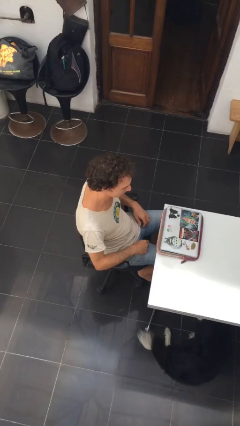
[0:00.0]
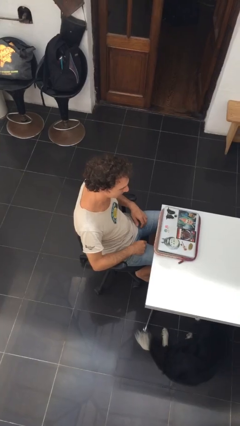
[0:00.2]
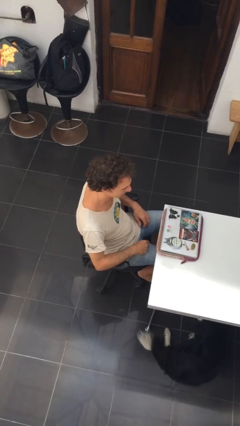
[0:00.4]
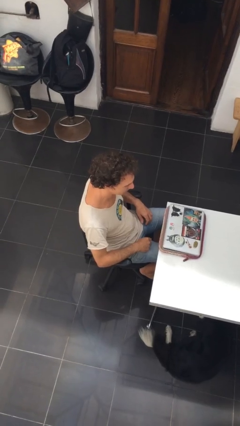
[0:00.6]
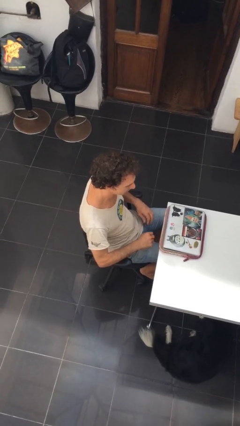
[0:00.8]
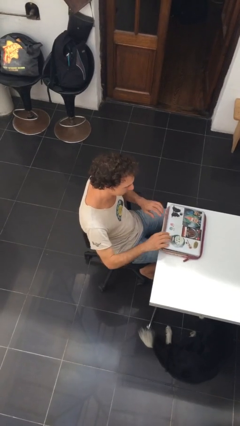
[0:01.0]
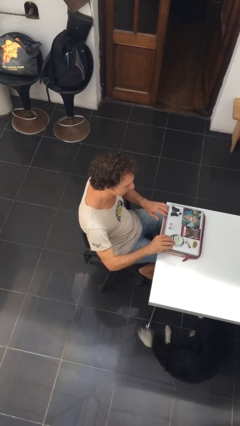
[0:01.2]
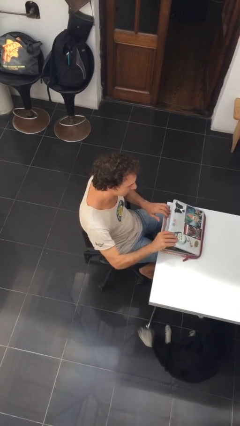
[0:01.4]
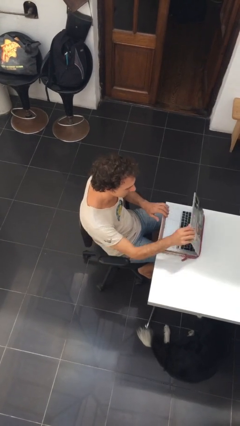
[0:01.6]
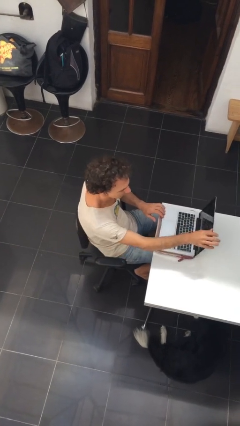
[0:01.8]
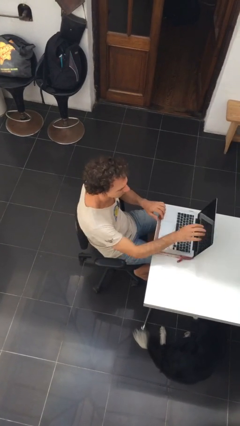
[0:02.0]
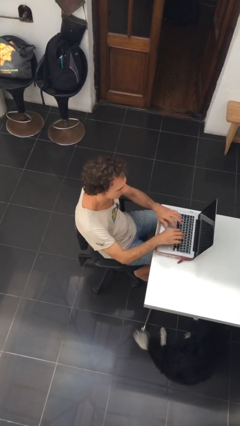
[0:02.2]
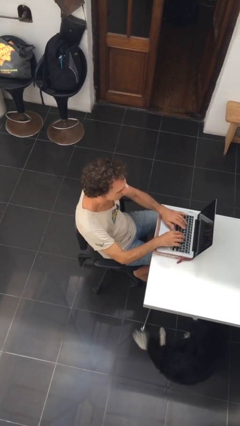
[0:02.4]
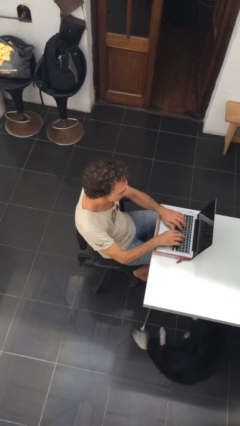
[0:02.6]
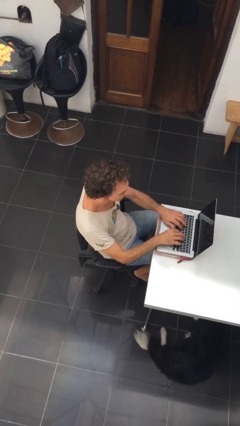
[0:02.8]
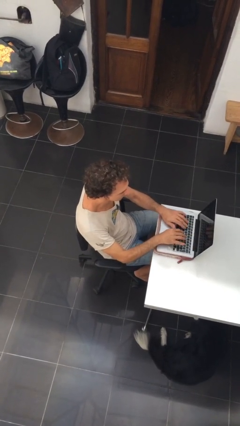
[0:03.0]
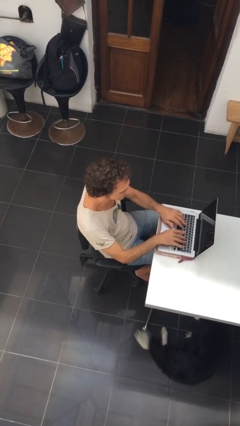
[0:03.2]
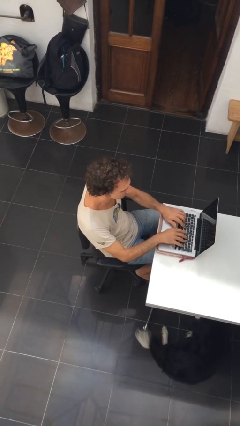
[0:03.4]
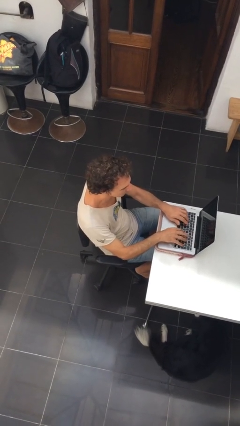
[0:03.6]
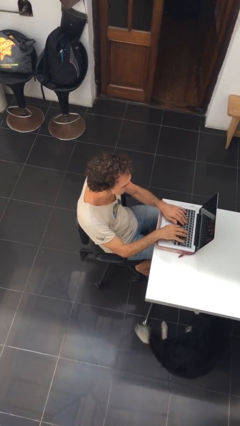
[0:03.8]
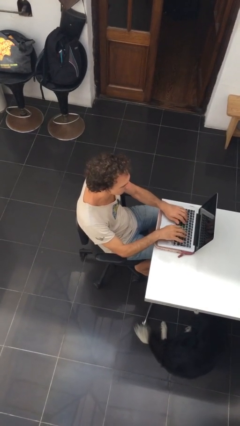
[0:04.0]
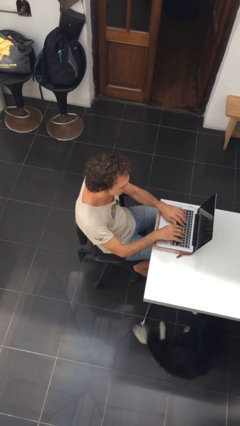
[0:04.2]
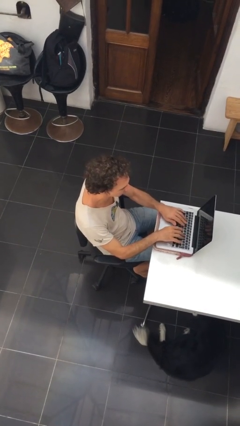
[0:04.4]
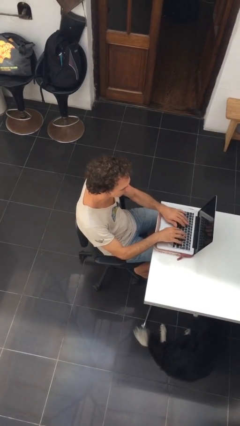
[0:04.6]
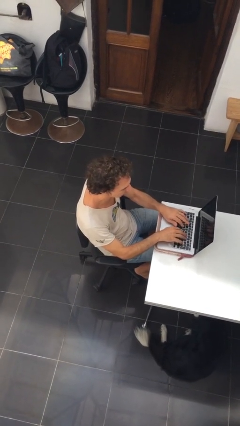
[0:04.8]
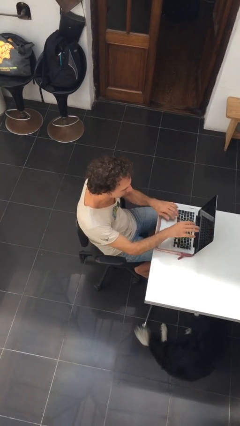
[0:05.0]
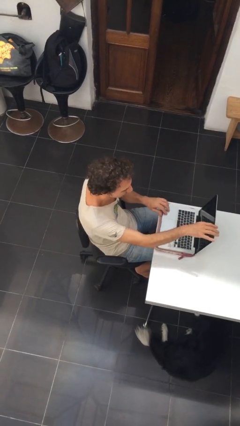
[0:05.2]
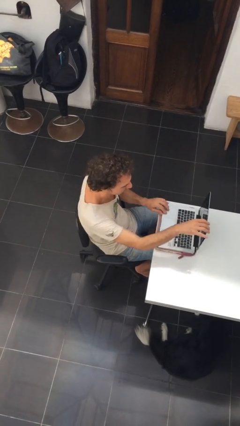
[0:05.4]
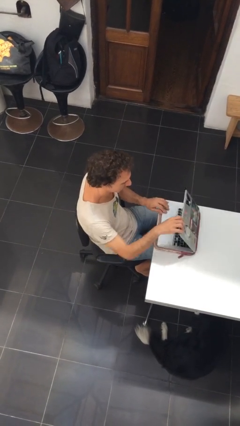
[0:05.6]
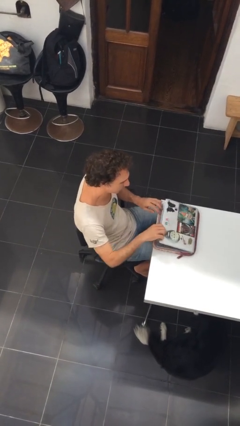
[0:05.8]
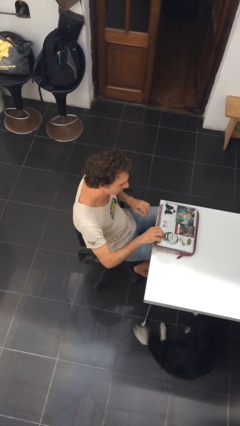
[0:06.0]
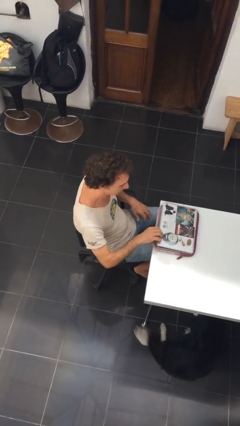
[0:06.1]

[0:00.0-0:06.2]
person interacts with laptop

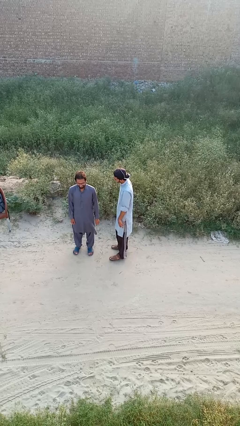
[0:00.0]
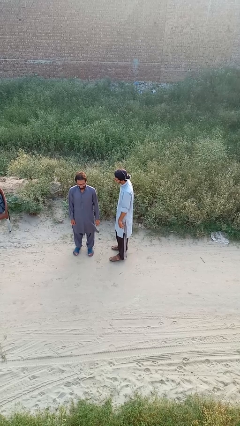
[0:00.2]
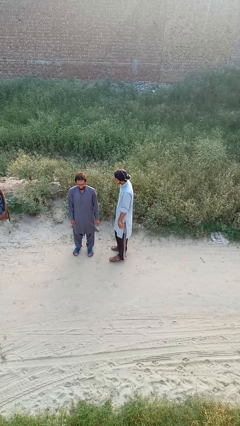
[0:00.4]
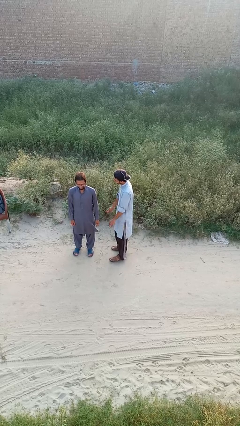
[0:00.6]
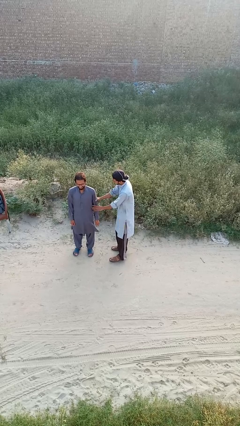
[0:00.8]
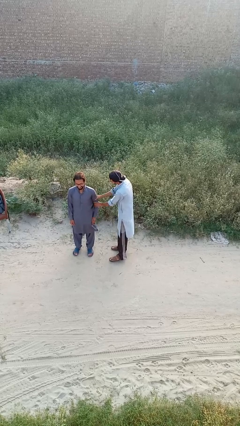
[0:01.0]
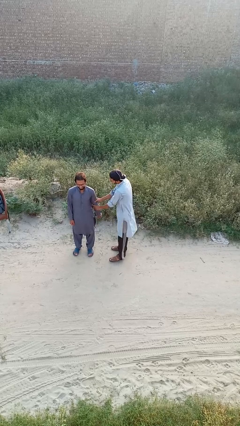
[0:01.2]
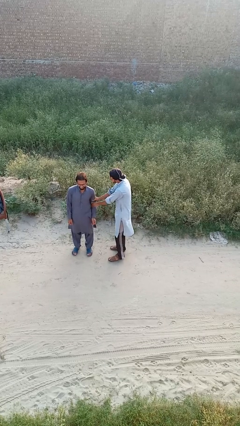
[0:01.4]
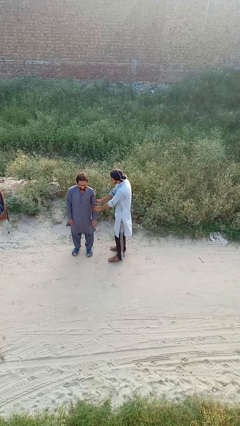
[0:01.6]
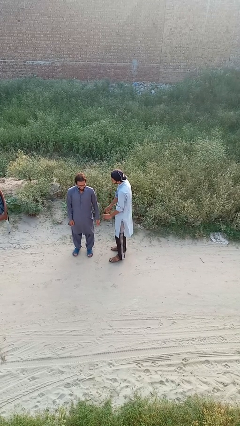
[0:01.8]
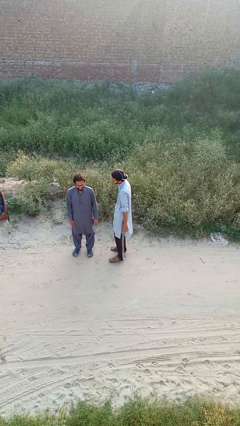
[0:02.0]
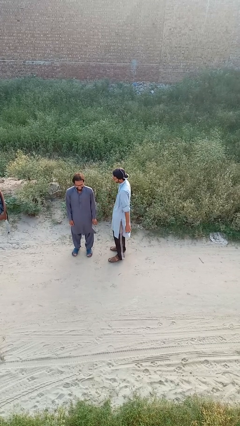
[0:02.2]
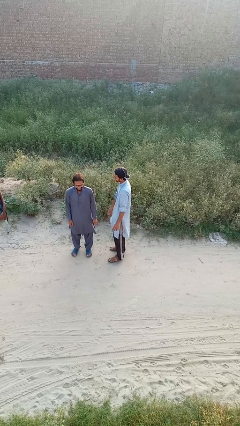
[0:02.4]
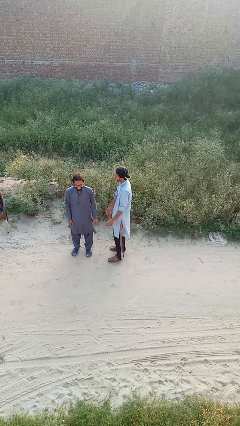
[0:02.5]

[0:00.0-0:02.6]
person grabs person by forearm

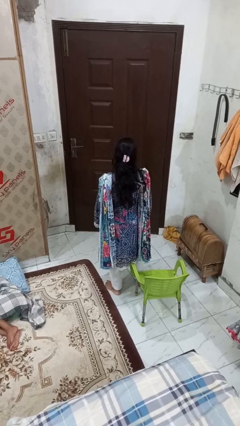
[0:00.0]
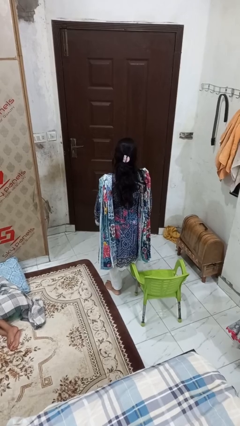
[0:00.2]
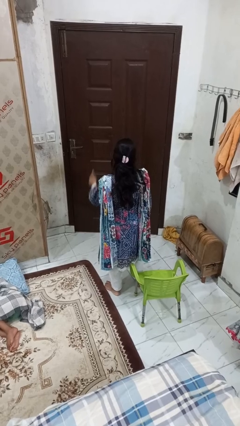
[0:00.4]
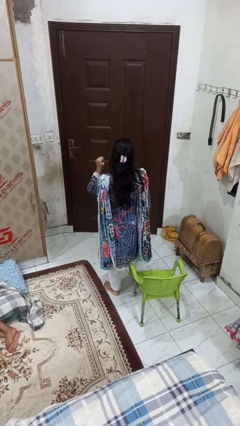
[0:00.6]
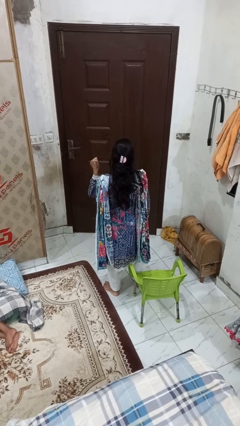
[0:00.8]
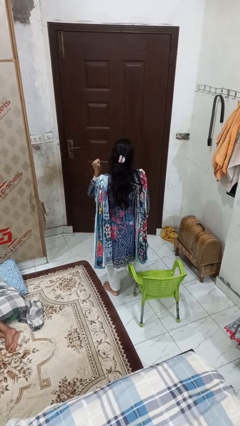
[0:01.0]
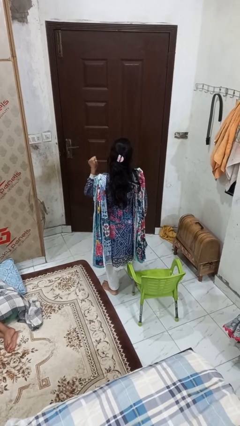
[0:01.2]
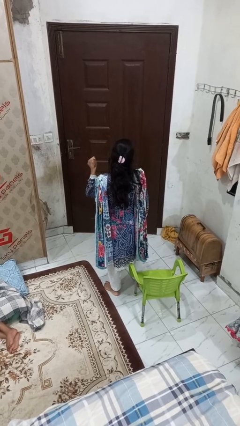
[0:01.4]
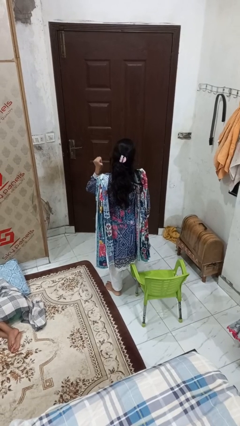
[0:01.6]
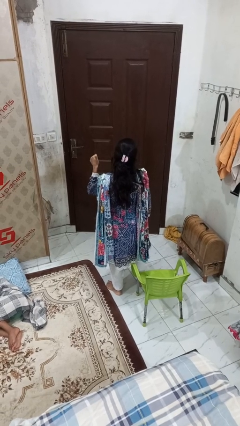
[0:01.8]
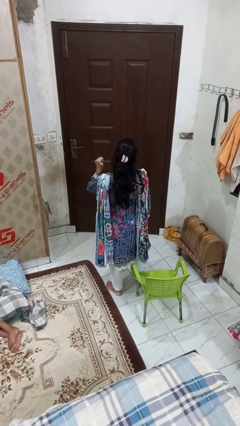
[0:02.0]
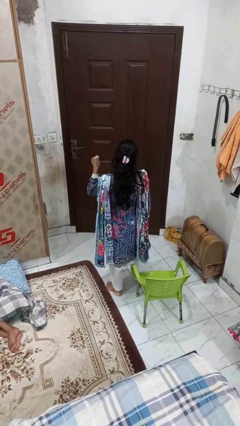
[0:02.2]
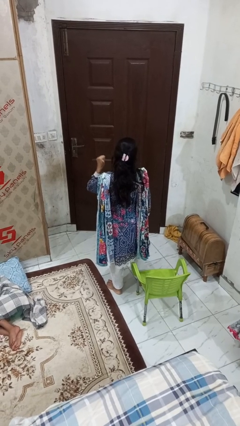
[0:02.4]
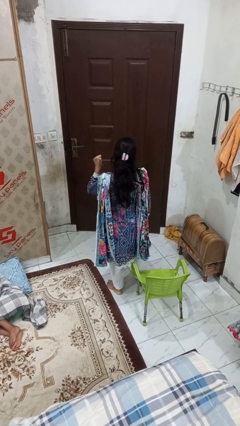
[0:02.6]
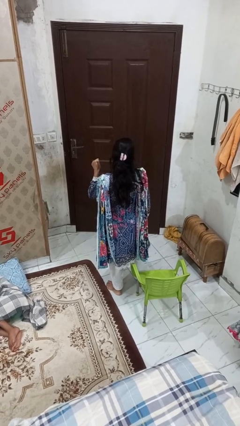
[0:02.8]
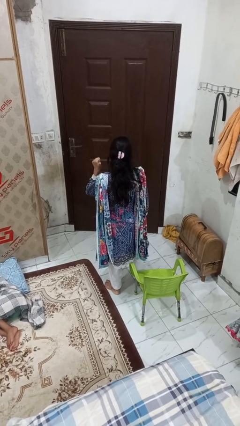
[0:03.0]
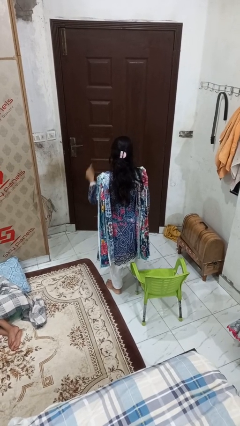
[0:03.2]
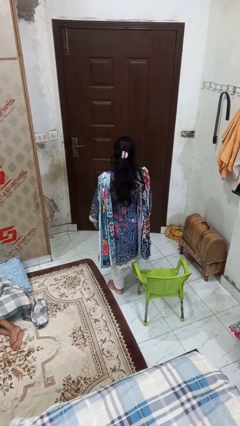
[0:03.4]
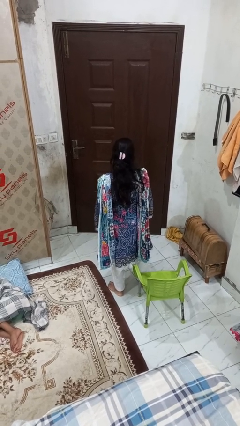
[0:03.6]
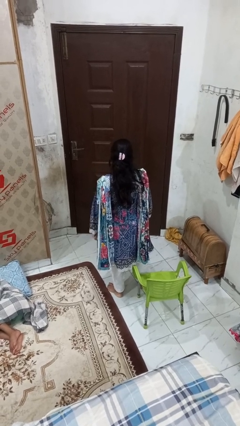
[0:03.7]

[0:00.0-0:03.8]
person gestures behind me

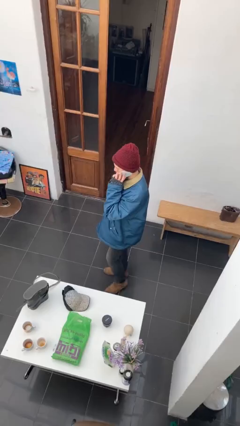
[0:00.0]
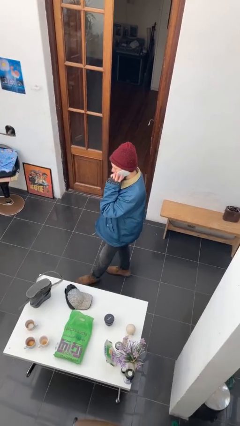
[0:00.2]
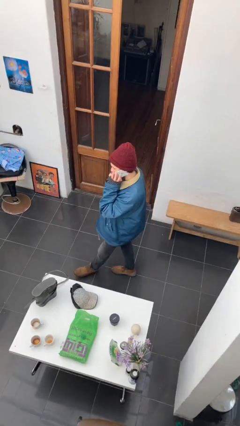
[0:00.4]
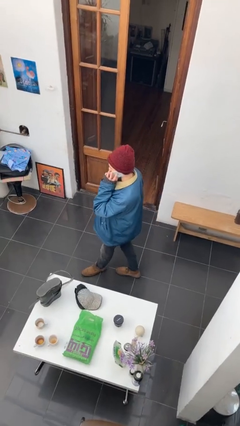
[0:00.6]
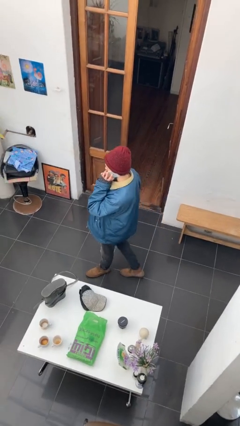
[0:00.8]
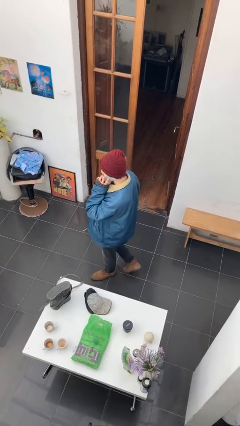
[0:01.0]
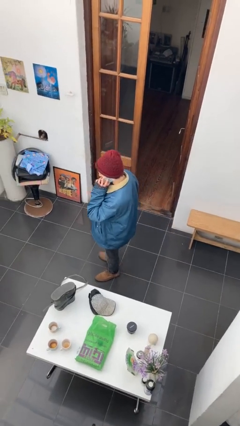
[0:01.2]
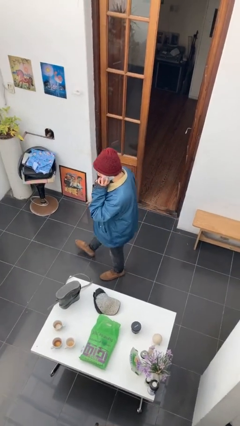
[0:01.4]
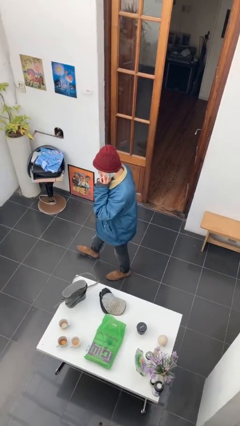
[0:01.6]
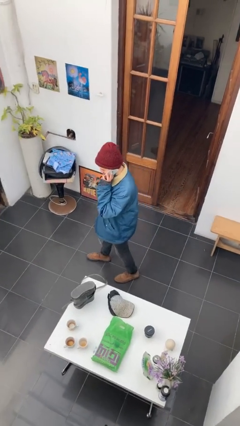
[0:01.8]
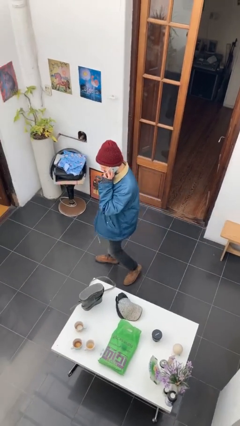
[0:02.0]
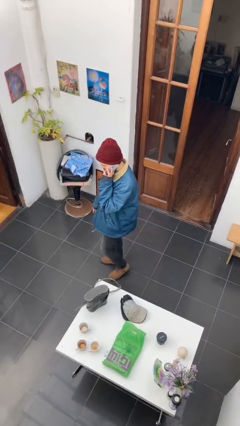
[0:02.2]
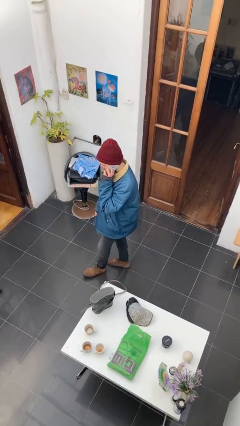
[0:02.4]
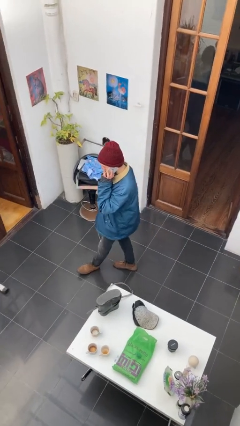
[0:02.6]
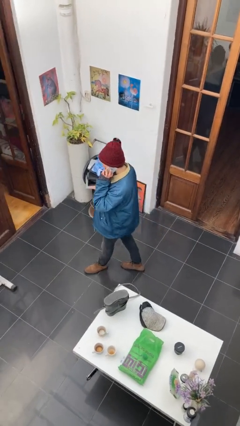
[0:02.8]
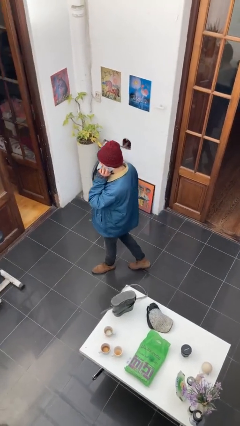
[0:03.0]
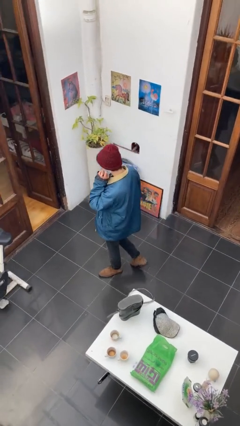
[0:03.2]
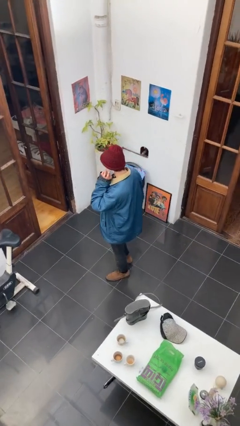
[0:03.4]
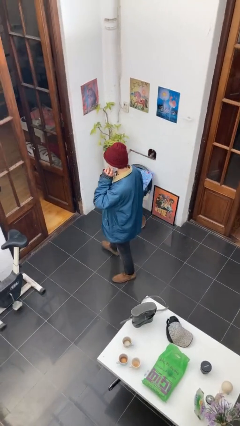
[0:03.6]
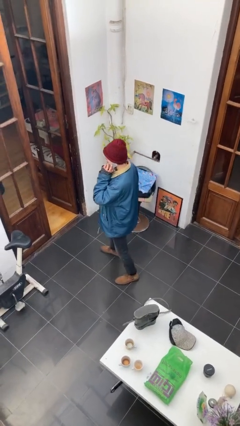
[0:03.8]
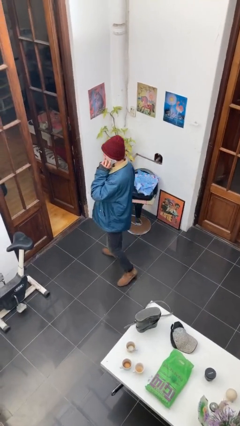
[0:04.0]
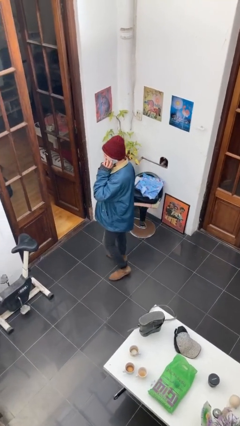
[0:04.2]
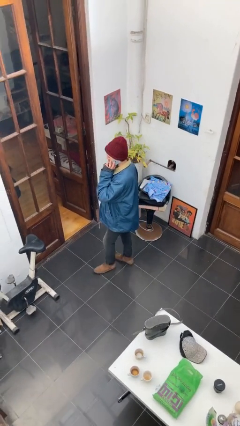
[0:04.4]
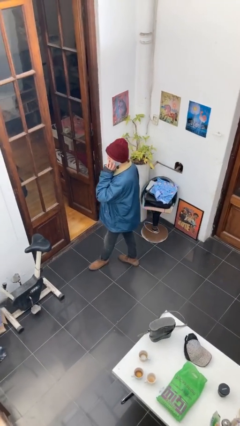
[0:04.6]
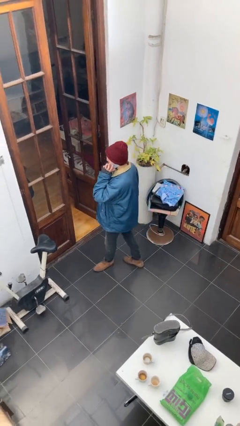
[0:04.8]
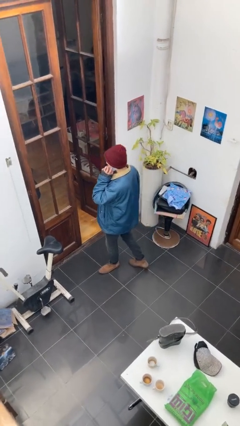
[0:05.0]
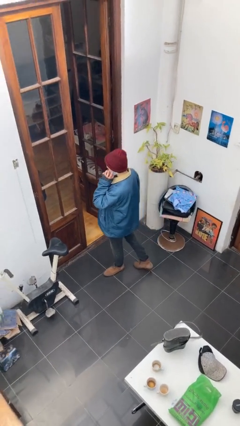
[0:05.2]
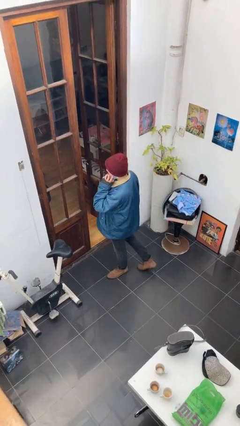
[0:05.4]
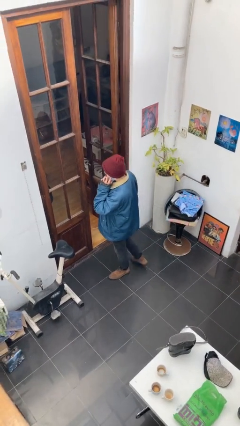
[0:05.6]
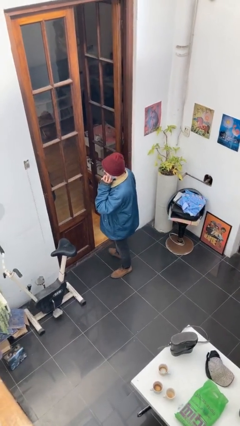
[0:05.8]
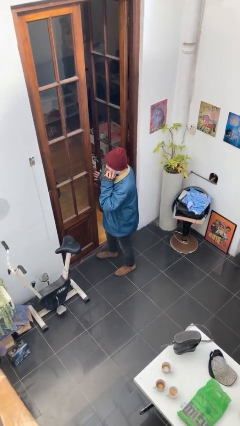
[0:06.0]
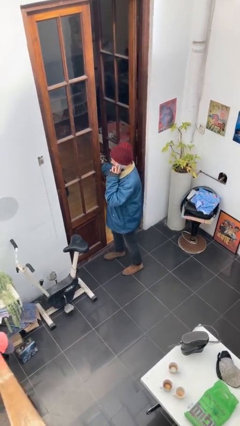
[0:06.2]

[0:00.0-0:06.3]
person talks on phone
